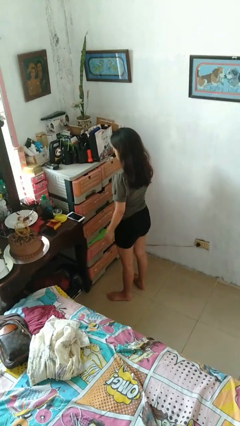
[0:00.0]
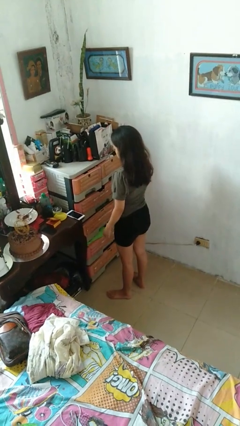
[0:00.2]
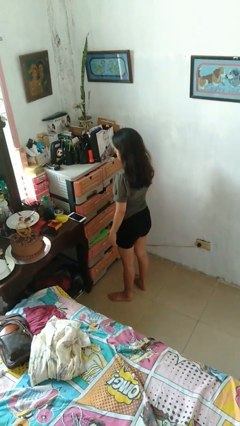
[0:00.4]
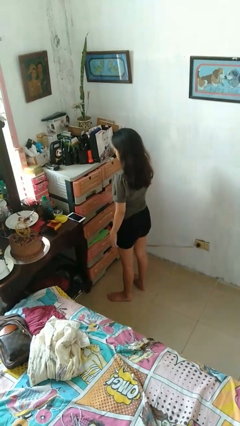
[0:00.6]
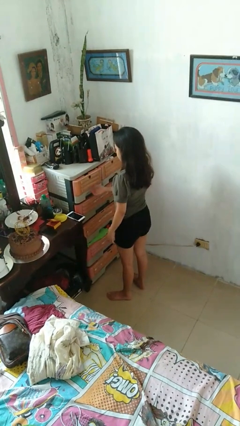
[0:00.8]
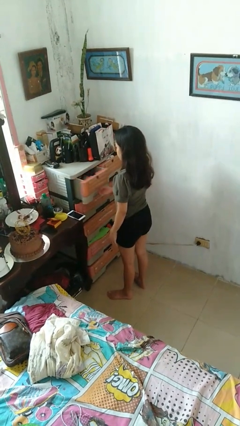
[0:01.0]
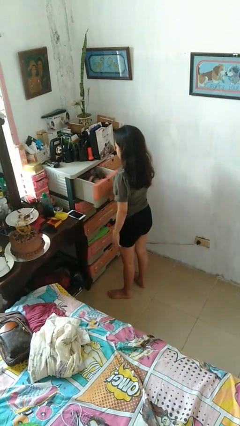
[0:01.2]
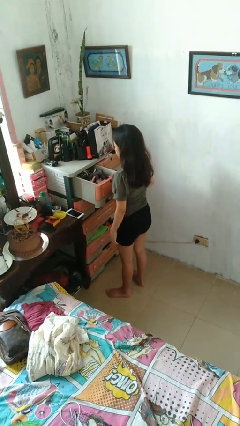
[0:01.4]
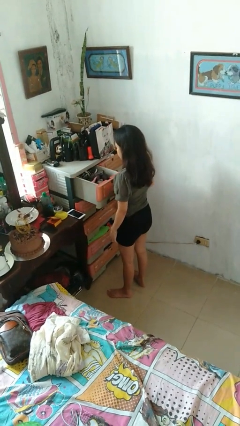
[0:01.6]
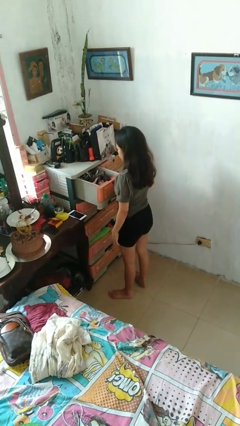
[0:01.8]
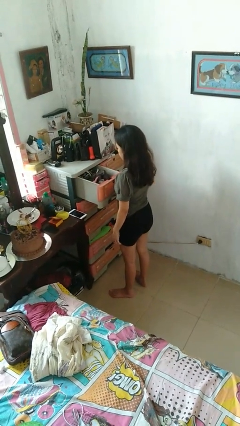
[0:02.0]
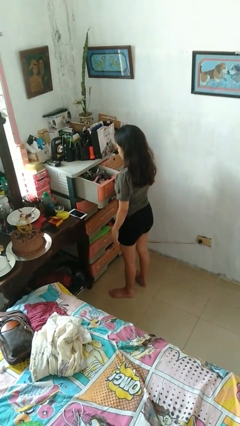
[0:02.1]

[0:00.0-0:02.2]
person opens dresser drawer

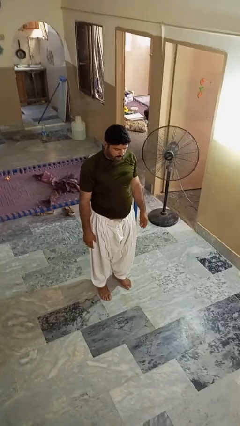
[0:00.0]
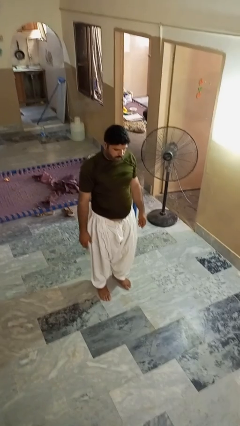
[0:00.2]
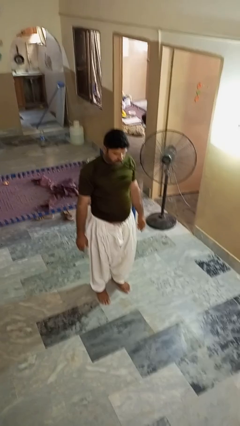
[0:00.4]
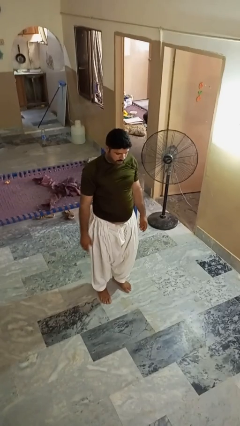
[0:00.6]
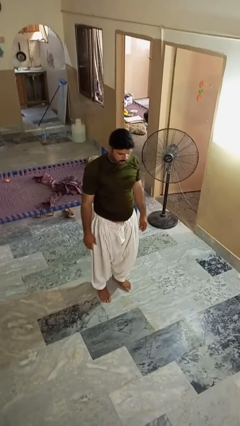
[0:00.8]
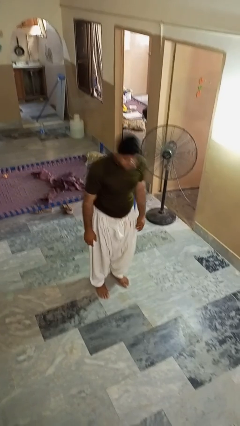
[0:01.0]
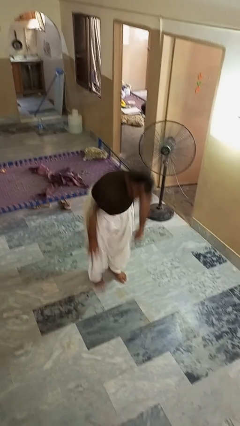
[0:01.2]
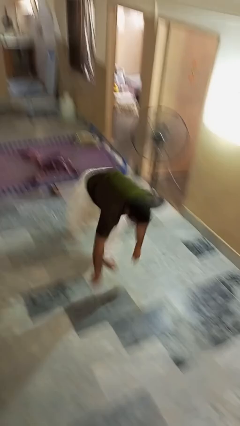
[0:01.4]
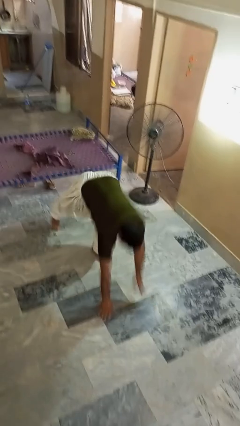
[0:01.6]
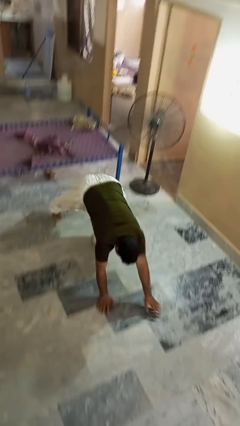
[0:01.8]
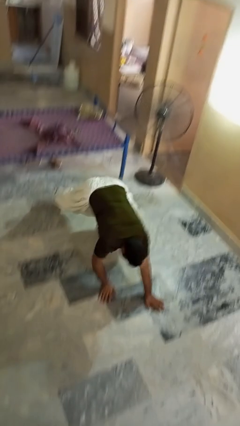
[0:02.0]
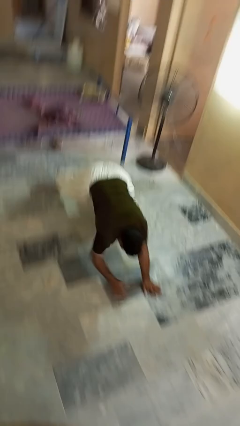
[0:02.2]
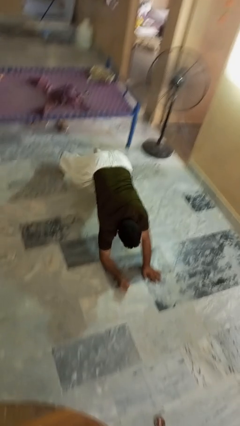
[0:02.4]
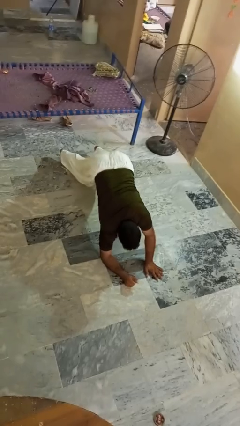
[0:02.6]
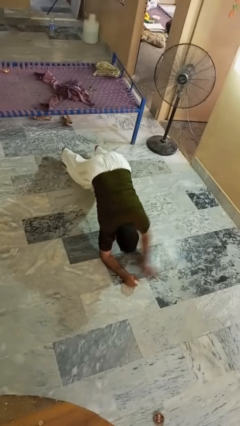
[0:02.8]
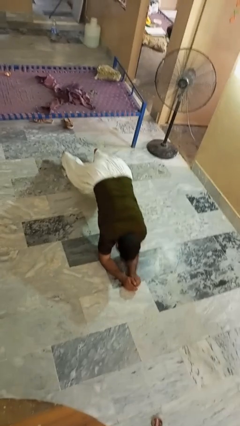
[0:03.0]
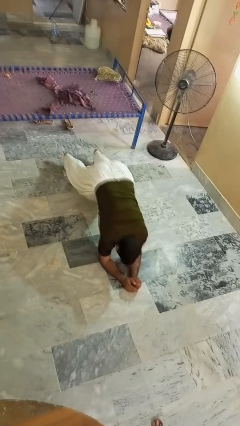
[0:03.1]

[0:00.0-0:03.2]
person exercises with plank

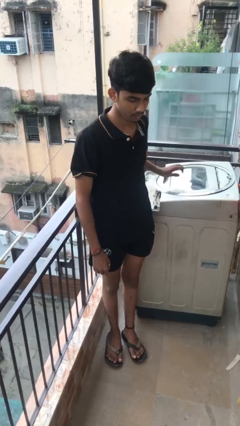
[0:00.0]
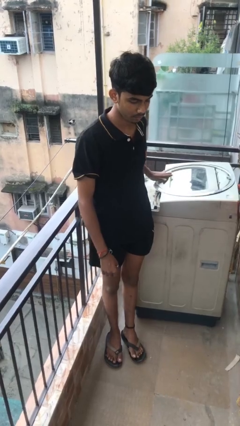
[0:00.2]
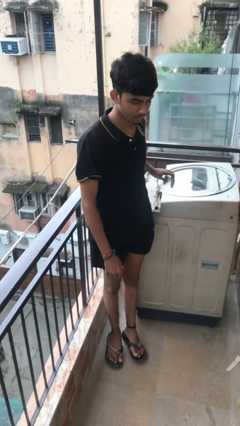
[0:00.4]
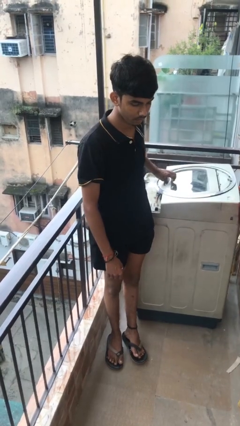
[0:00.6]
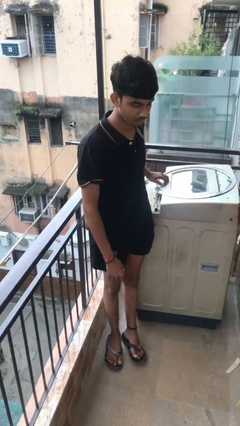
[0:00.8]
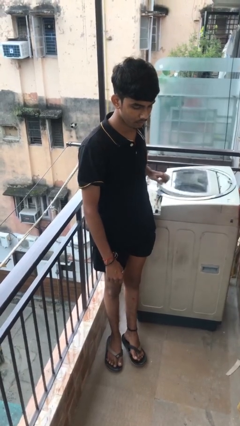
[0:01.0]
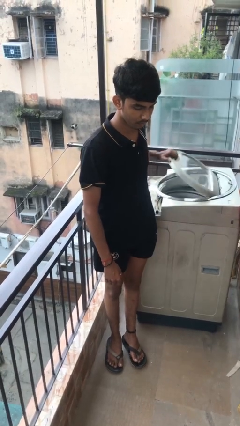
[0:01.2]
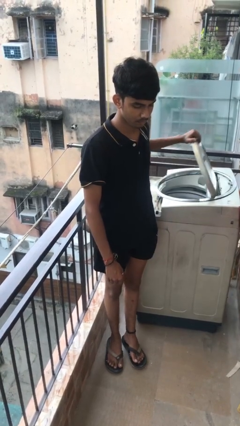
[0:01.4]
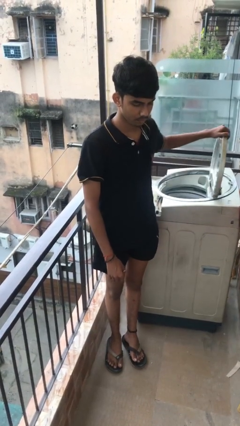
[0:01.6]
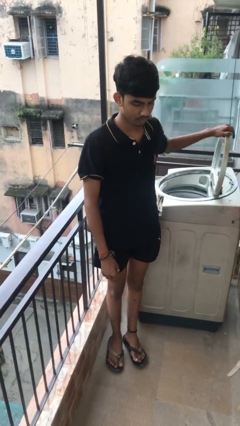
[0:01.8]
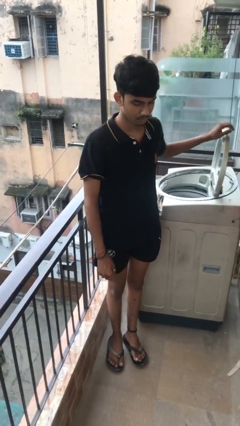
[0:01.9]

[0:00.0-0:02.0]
person opens clothes washer

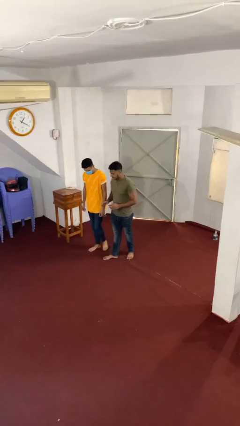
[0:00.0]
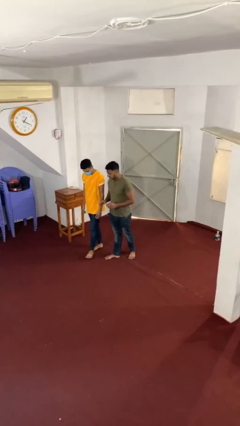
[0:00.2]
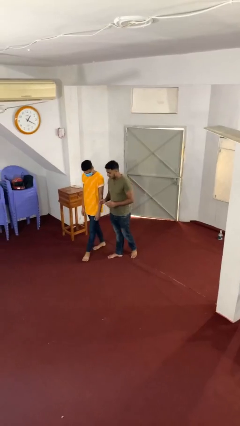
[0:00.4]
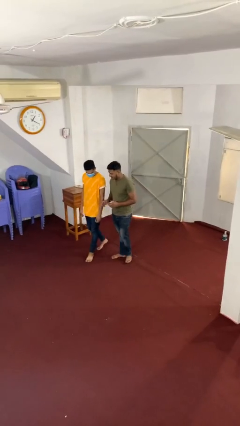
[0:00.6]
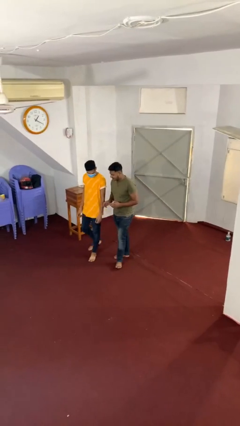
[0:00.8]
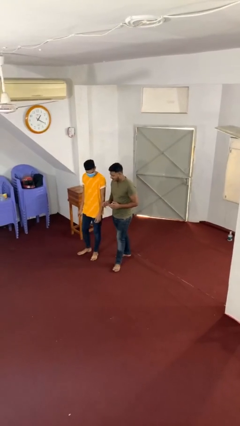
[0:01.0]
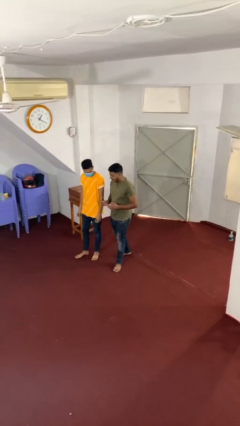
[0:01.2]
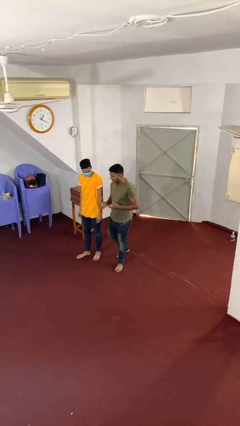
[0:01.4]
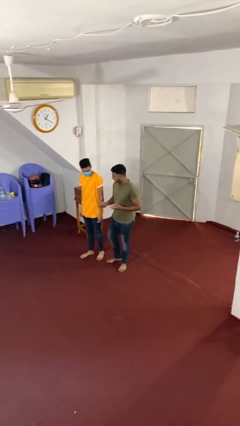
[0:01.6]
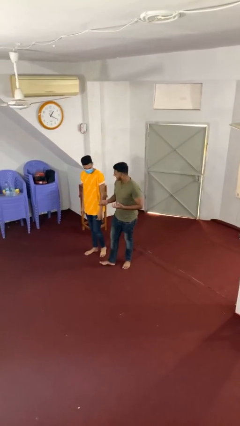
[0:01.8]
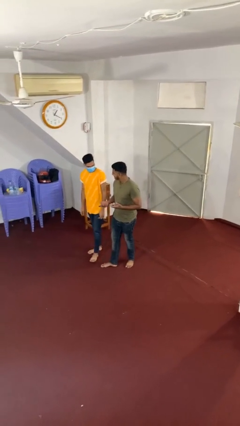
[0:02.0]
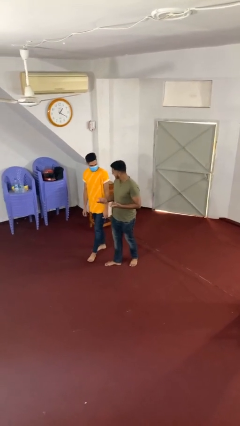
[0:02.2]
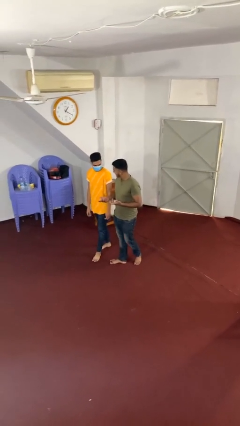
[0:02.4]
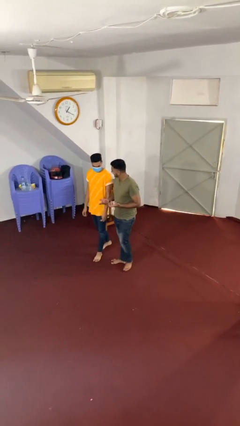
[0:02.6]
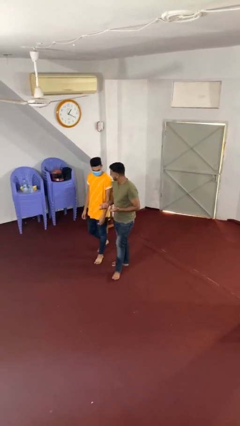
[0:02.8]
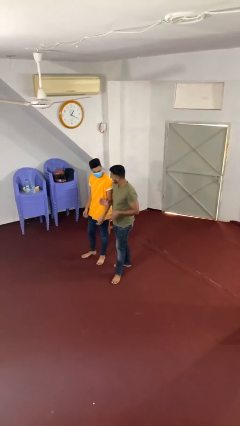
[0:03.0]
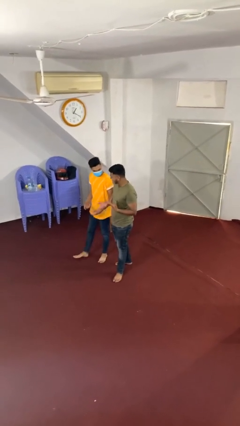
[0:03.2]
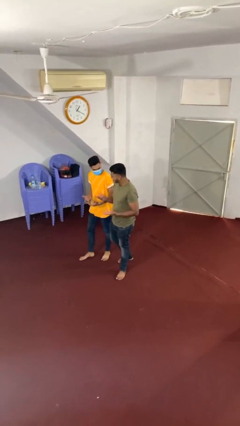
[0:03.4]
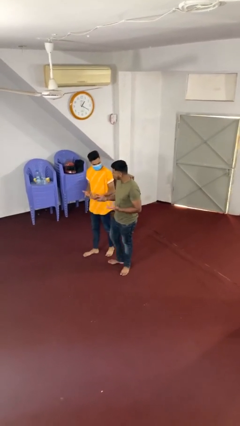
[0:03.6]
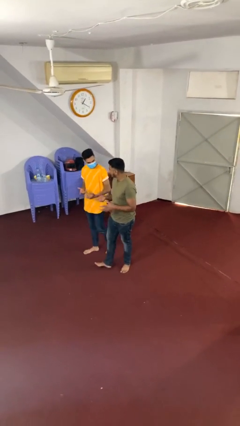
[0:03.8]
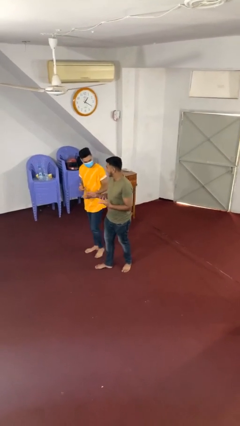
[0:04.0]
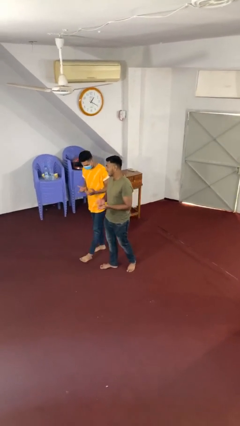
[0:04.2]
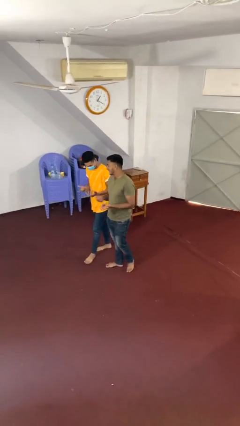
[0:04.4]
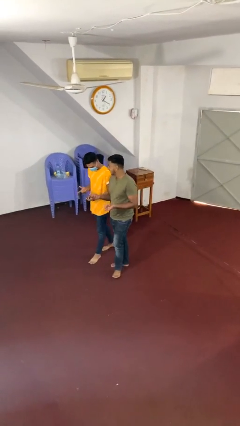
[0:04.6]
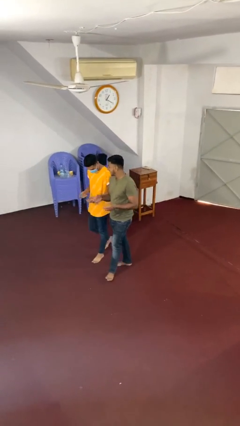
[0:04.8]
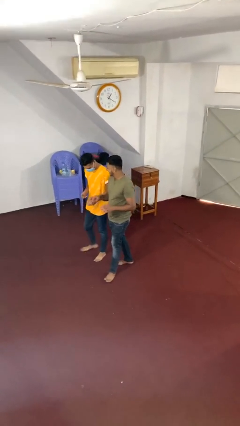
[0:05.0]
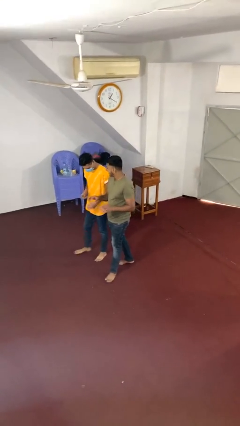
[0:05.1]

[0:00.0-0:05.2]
person talks to person

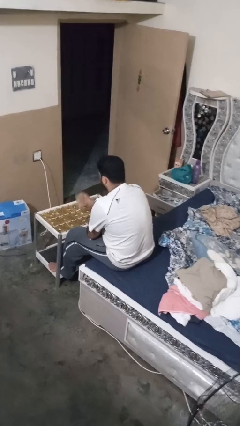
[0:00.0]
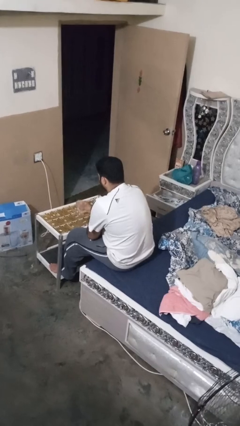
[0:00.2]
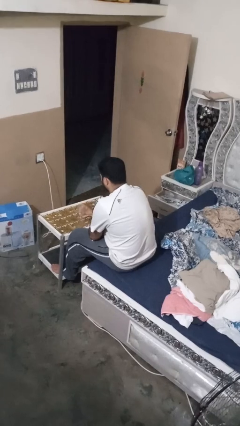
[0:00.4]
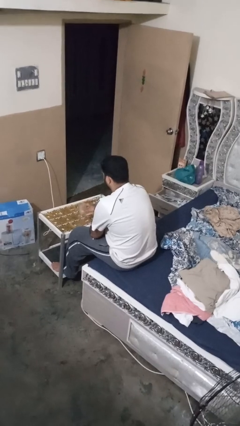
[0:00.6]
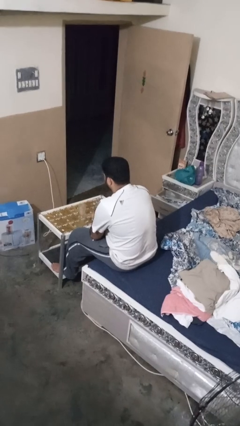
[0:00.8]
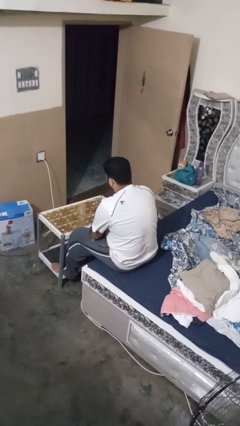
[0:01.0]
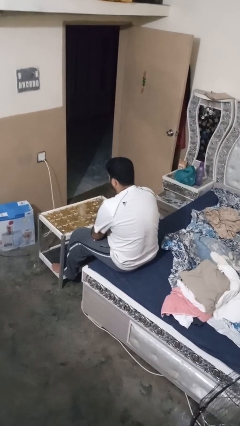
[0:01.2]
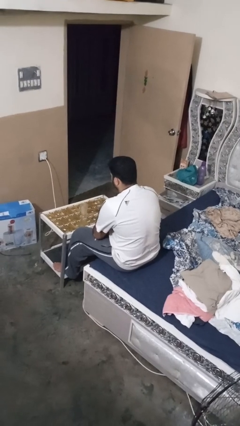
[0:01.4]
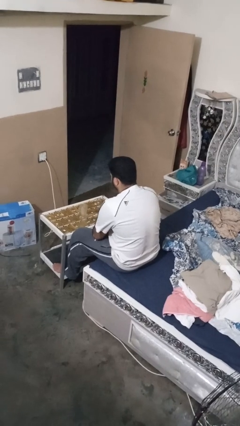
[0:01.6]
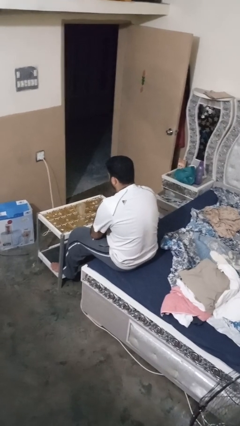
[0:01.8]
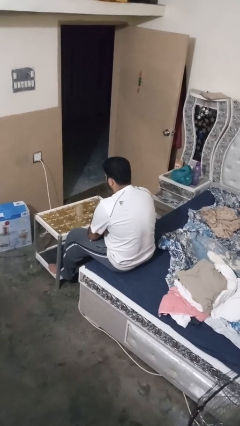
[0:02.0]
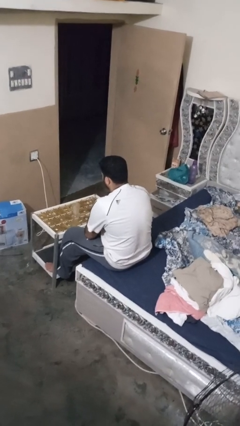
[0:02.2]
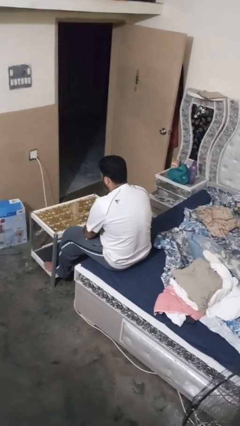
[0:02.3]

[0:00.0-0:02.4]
person puts down object on table

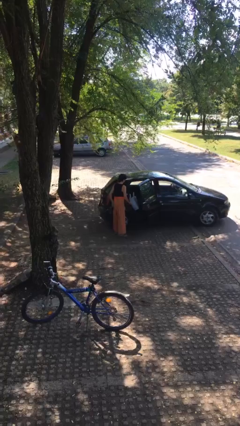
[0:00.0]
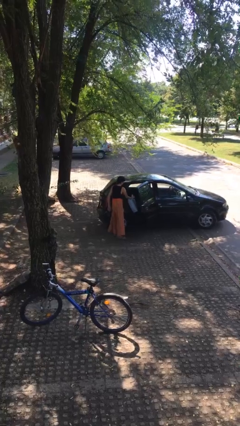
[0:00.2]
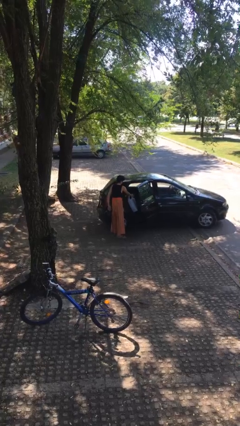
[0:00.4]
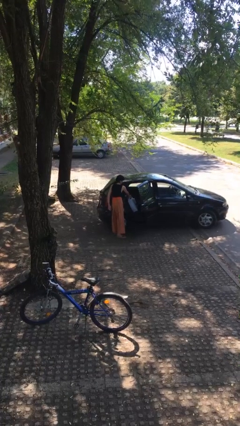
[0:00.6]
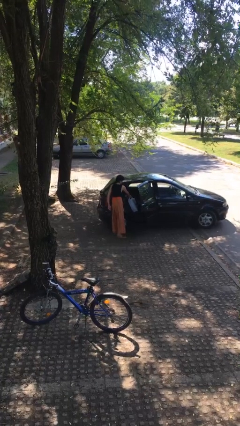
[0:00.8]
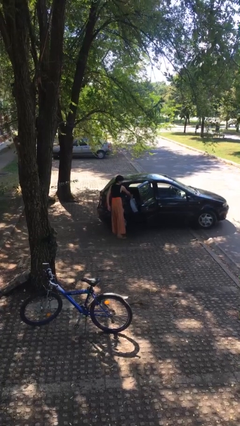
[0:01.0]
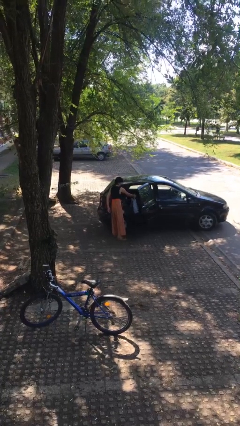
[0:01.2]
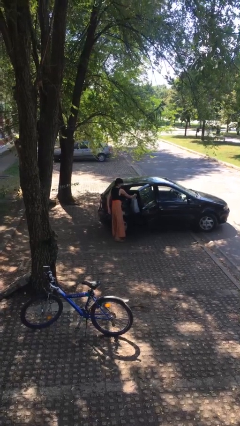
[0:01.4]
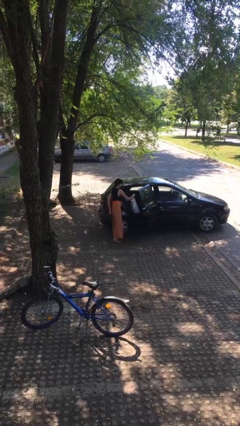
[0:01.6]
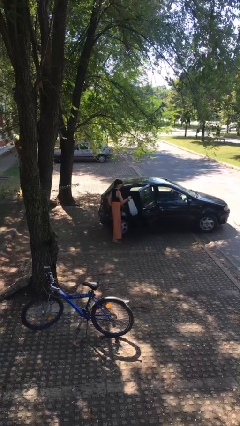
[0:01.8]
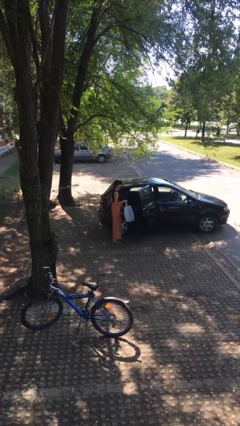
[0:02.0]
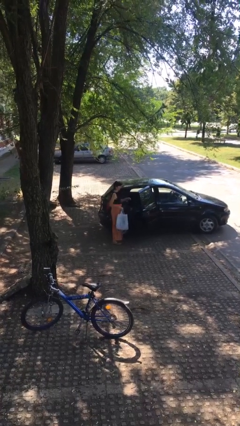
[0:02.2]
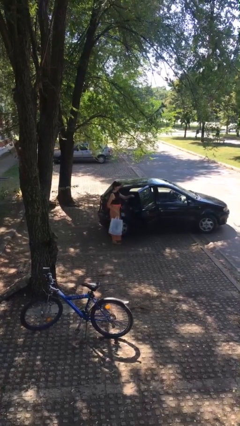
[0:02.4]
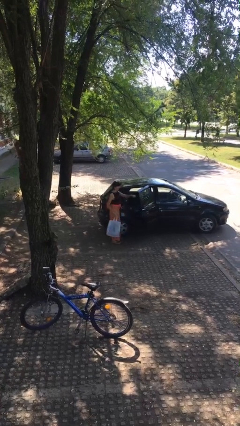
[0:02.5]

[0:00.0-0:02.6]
person unloads car
